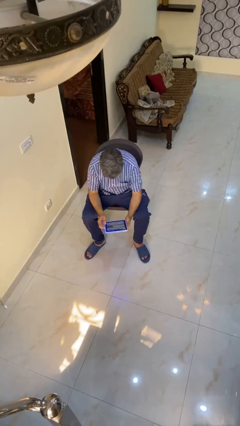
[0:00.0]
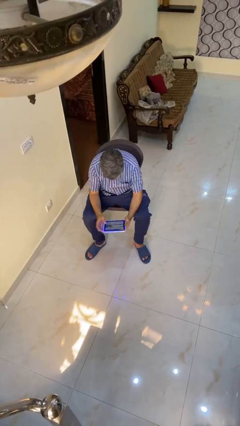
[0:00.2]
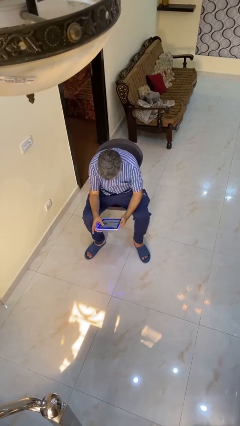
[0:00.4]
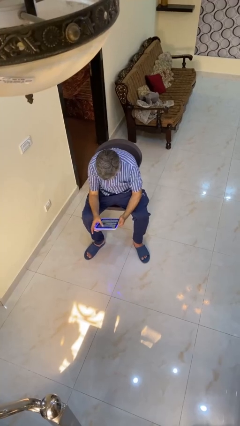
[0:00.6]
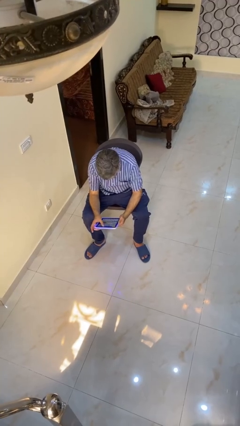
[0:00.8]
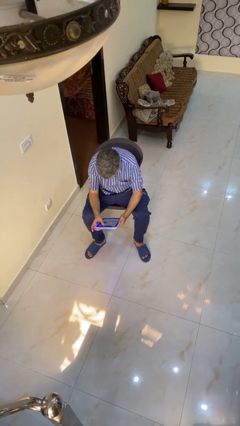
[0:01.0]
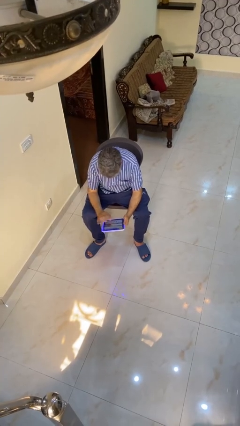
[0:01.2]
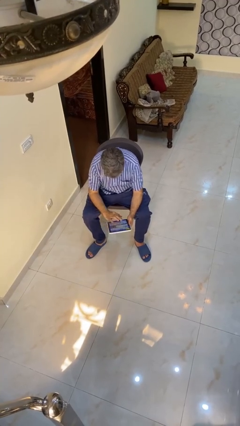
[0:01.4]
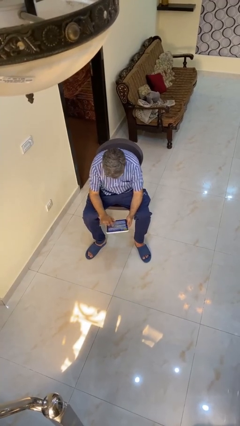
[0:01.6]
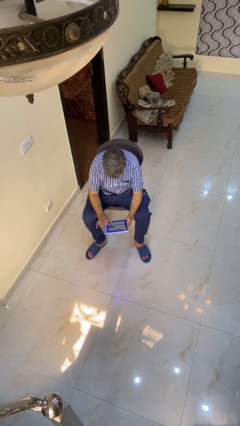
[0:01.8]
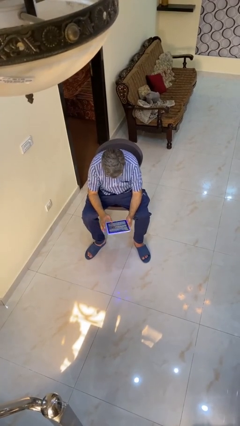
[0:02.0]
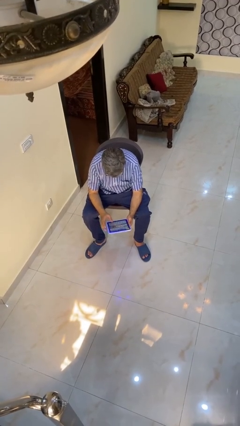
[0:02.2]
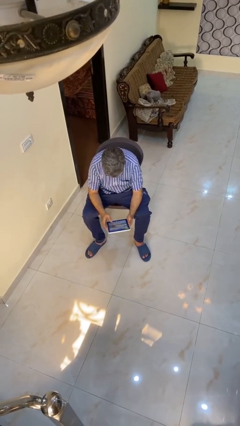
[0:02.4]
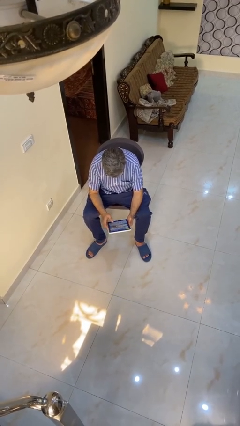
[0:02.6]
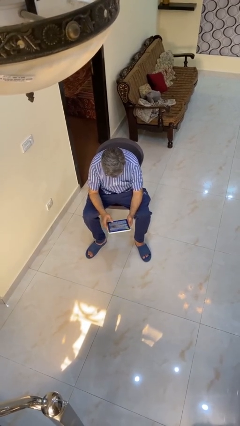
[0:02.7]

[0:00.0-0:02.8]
person interacts with tablet

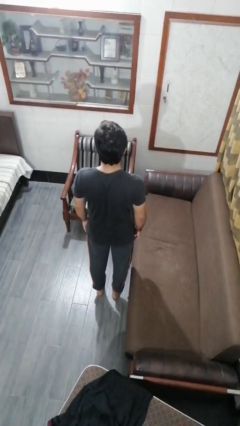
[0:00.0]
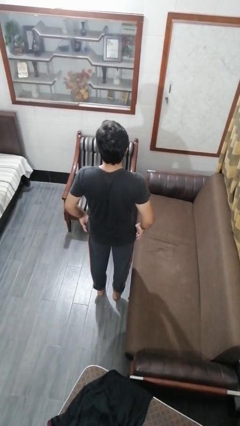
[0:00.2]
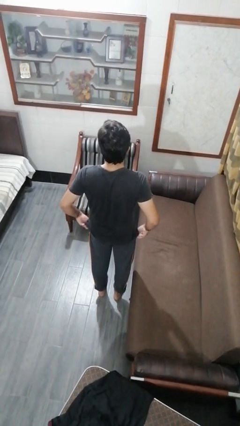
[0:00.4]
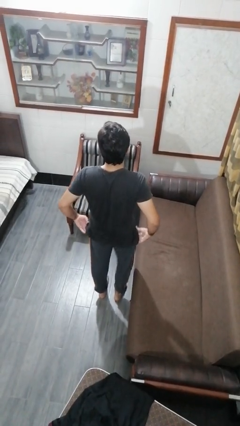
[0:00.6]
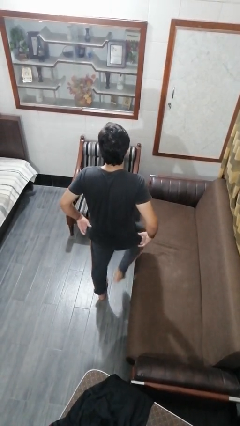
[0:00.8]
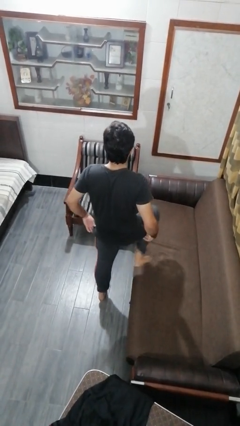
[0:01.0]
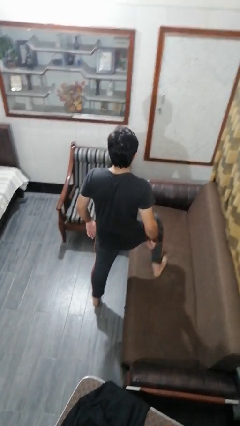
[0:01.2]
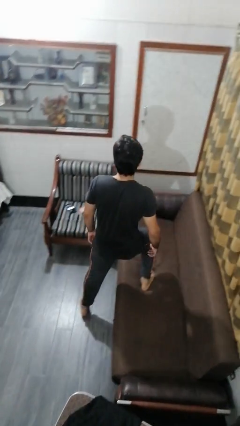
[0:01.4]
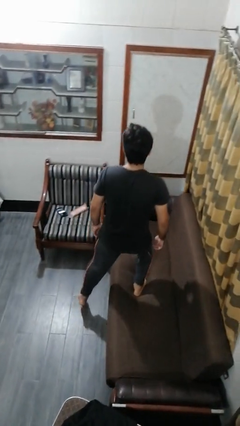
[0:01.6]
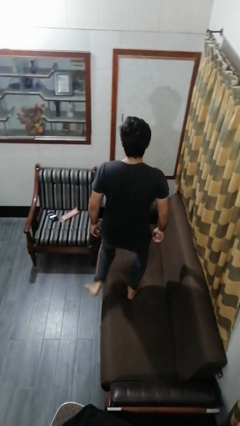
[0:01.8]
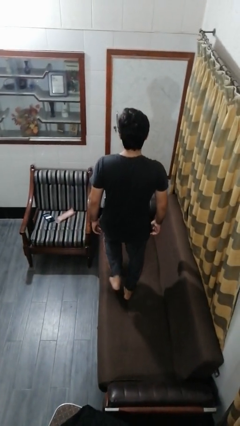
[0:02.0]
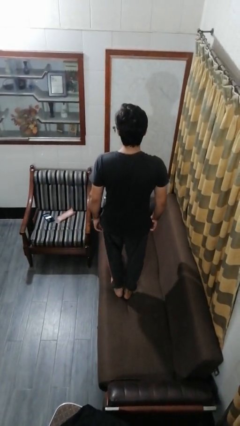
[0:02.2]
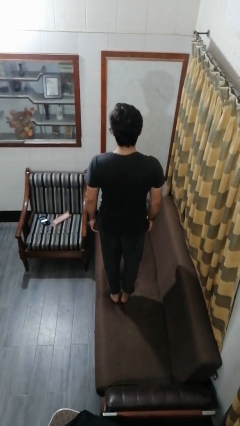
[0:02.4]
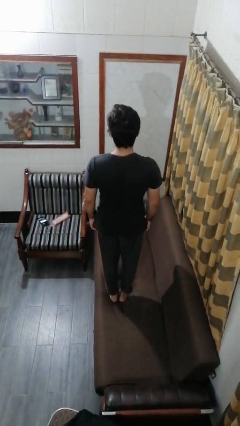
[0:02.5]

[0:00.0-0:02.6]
person climbs on couch

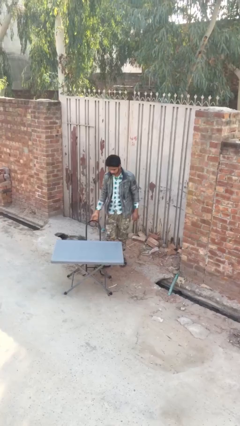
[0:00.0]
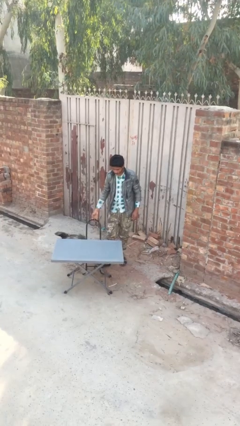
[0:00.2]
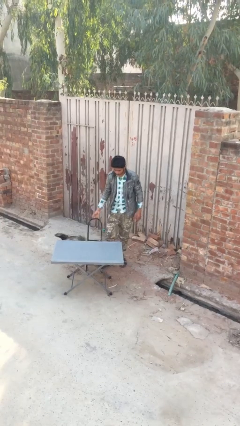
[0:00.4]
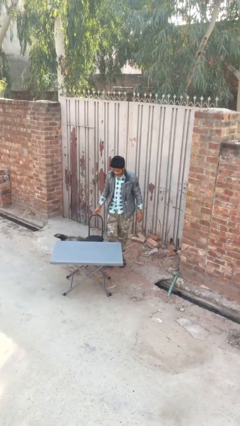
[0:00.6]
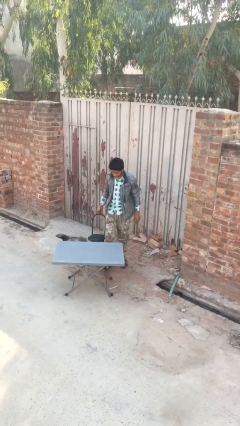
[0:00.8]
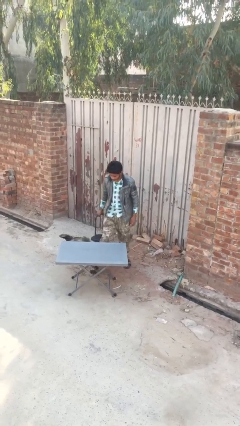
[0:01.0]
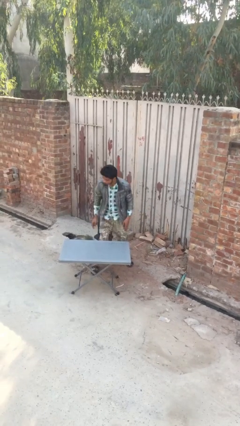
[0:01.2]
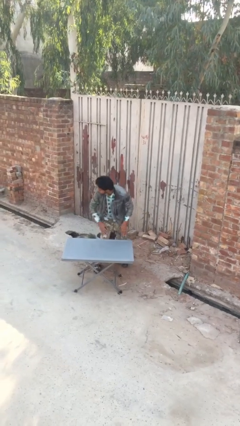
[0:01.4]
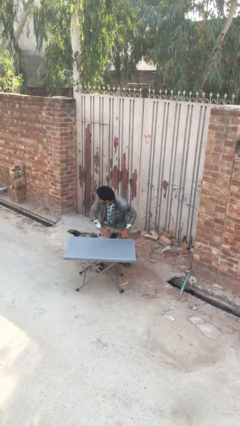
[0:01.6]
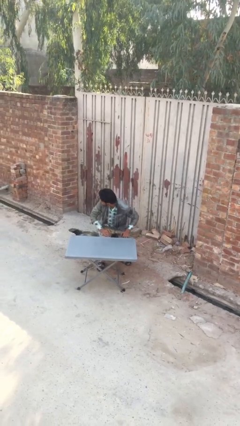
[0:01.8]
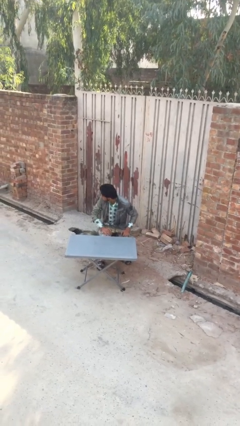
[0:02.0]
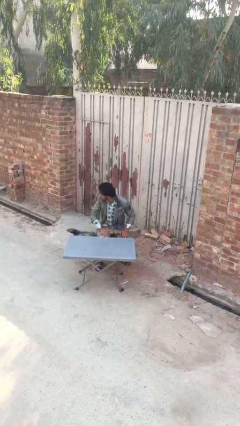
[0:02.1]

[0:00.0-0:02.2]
person sits down

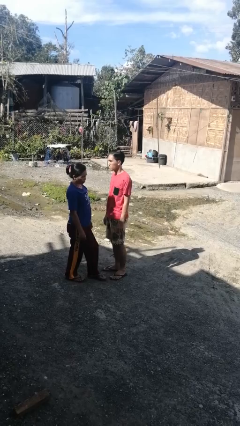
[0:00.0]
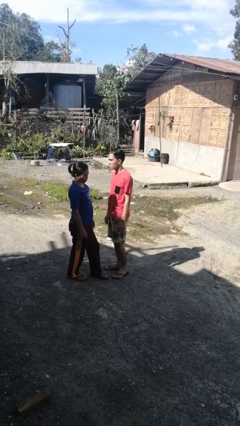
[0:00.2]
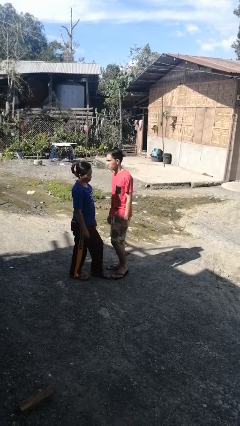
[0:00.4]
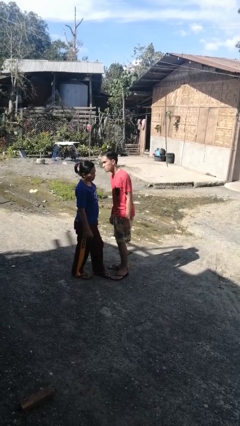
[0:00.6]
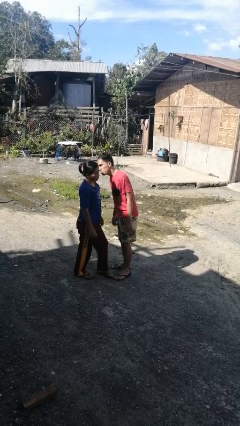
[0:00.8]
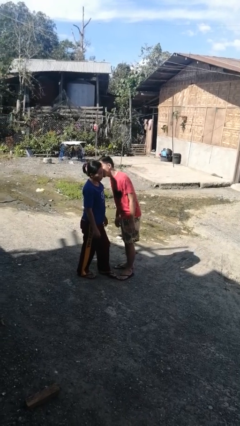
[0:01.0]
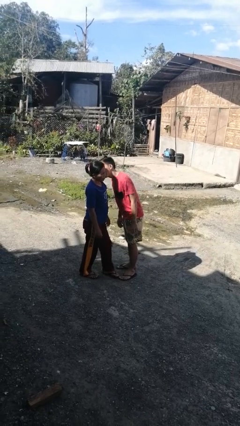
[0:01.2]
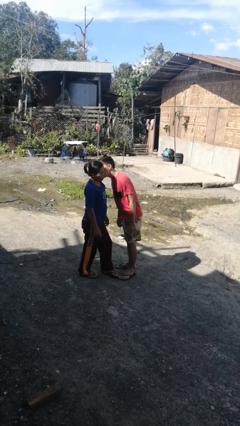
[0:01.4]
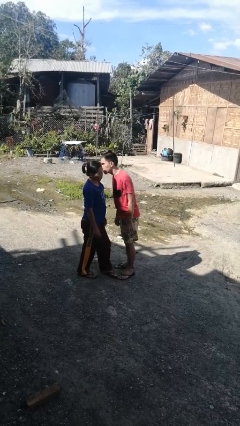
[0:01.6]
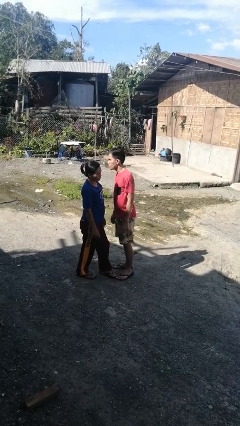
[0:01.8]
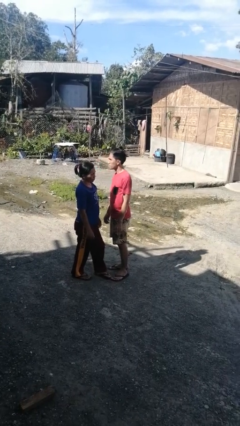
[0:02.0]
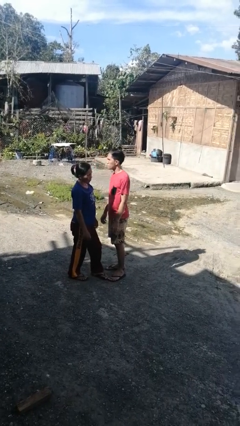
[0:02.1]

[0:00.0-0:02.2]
person kisses cheek of person

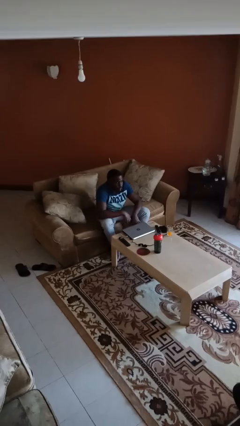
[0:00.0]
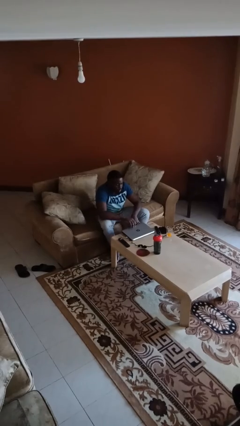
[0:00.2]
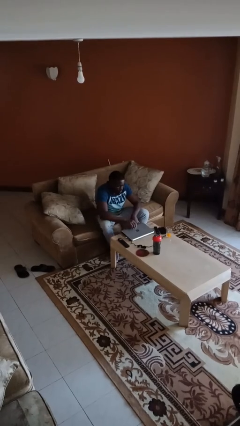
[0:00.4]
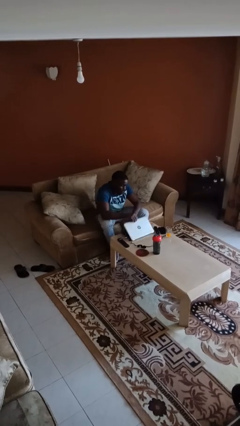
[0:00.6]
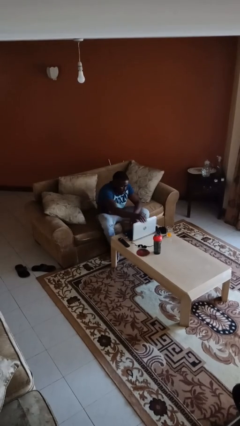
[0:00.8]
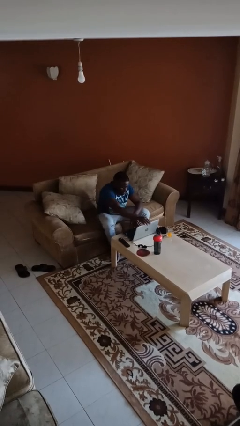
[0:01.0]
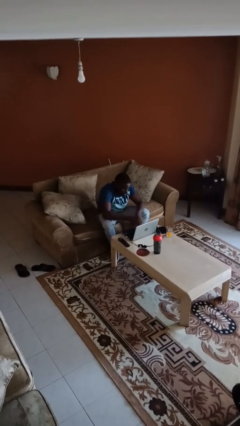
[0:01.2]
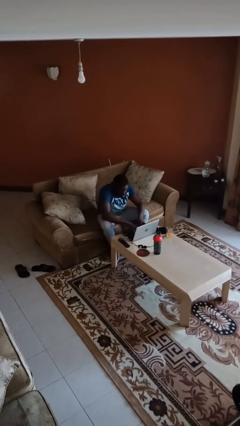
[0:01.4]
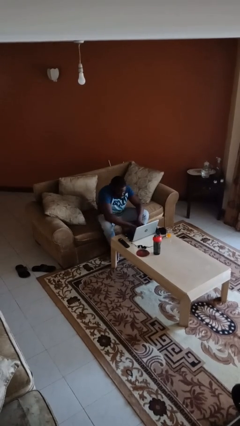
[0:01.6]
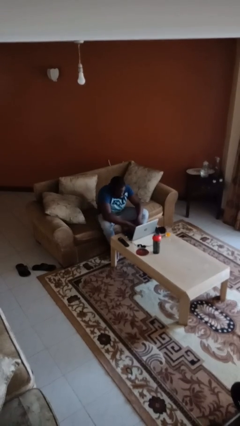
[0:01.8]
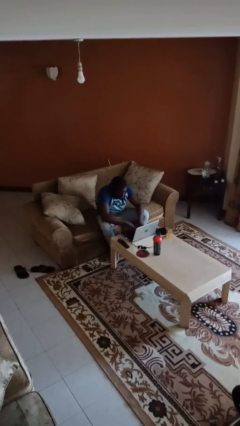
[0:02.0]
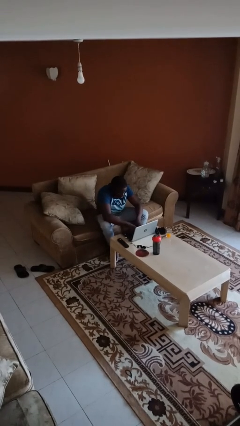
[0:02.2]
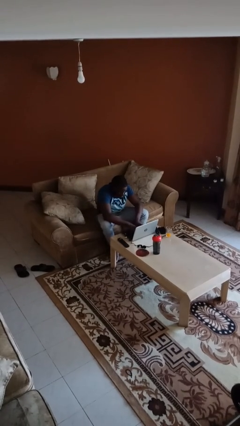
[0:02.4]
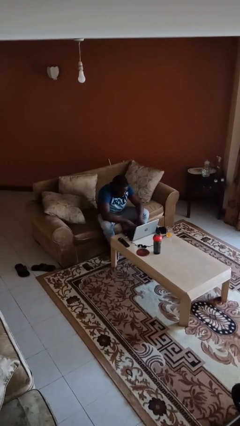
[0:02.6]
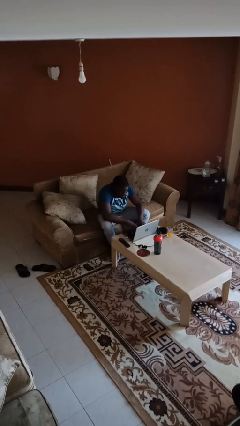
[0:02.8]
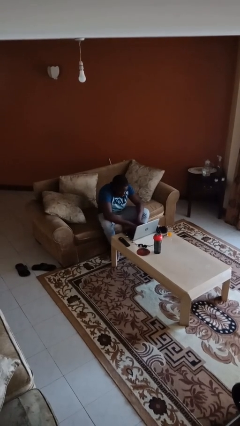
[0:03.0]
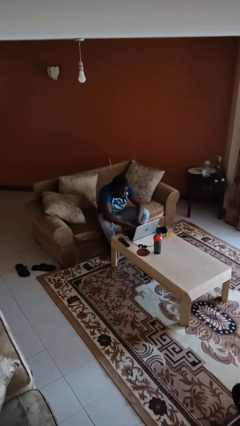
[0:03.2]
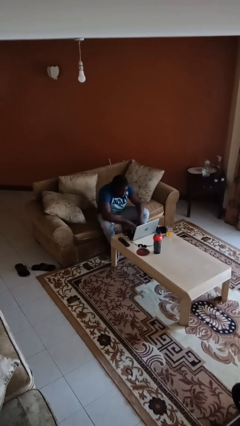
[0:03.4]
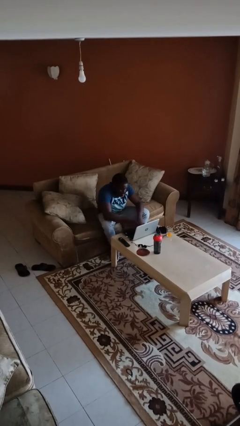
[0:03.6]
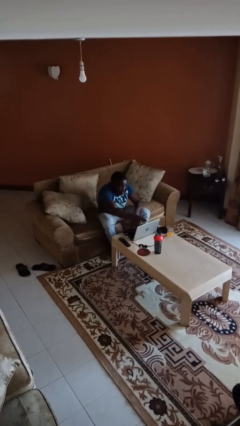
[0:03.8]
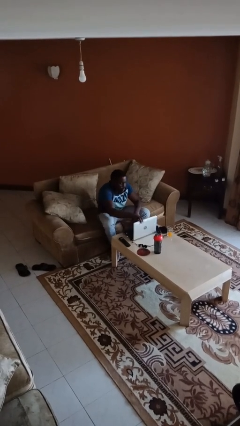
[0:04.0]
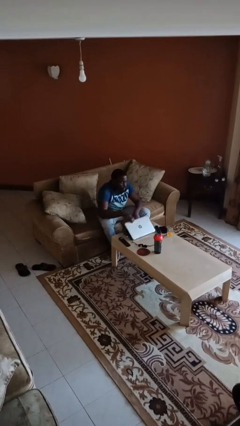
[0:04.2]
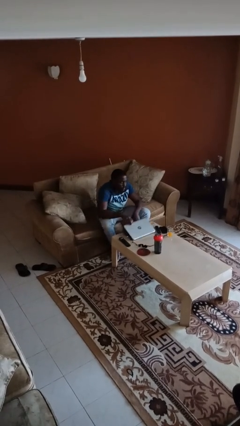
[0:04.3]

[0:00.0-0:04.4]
person interacts with laptop

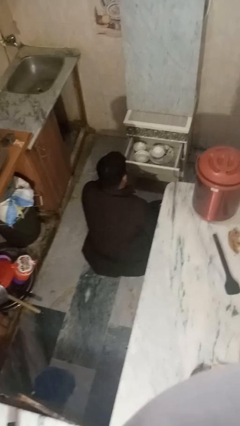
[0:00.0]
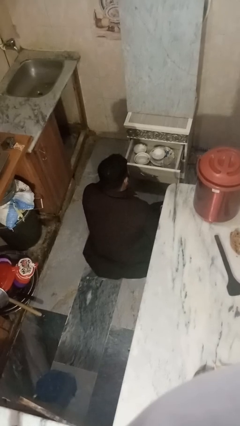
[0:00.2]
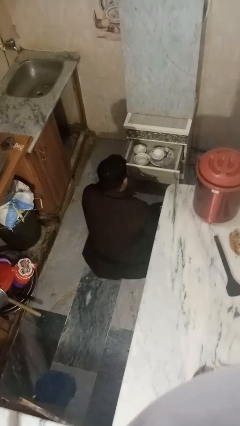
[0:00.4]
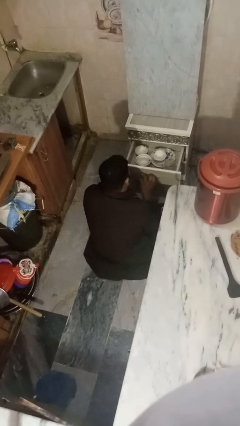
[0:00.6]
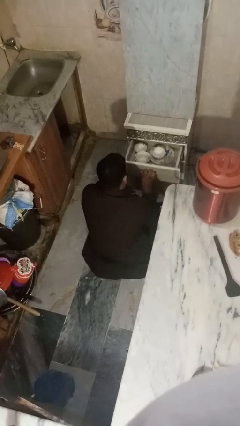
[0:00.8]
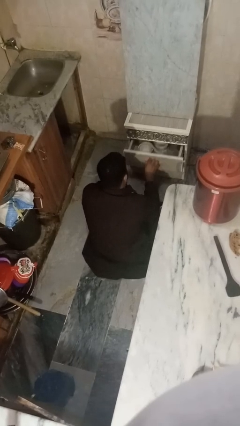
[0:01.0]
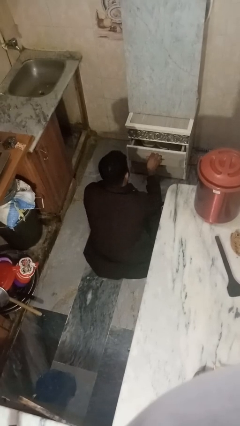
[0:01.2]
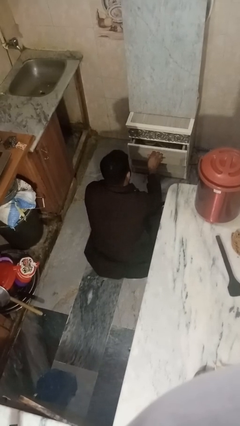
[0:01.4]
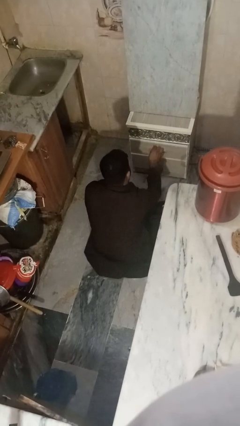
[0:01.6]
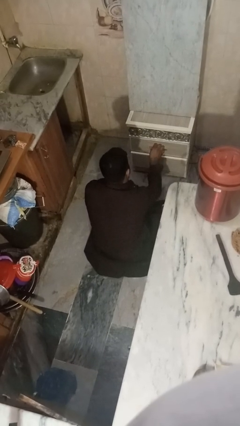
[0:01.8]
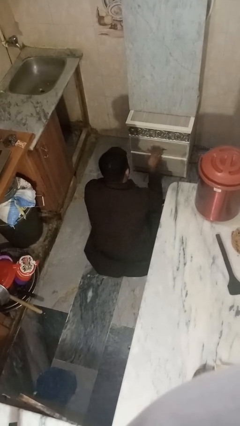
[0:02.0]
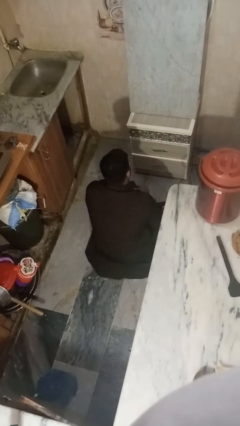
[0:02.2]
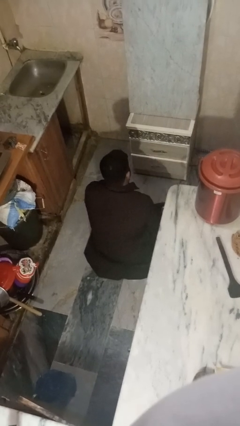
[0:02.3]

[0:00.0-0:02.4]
person closes kitchen drawer

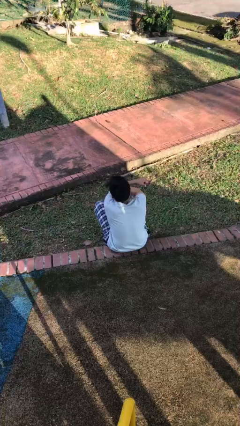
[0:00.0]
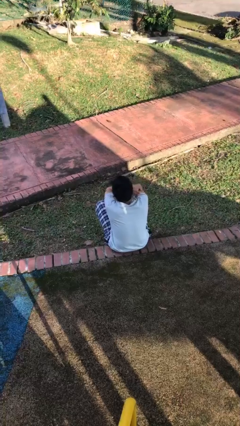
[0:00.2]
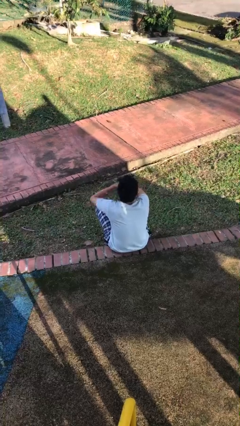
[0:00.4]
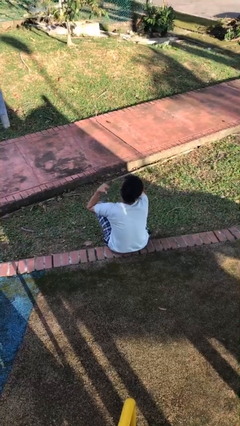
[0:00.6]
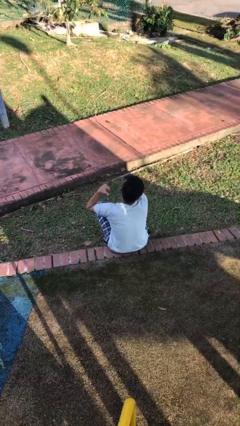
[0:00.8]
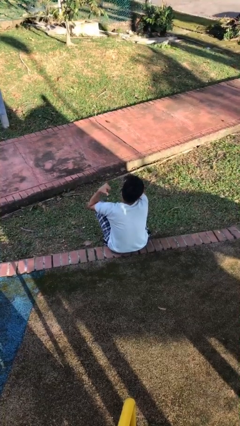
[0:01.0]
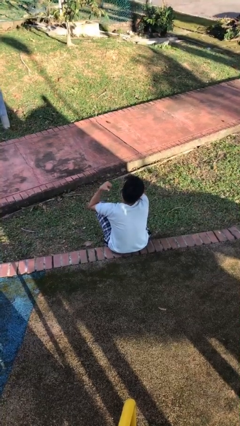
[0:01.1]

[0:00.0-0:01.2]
person gestures cut
